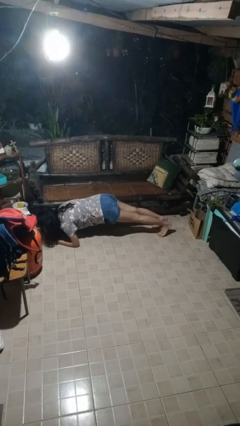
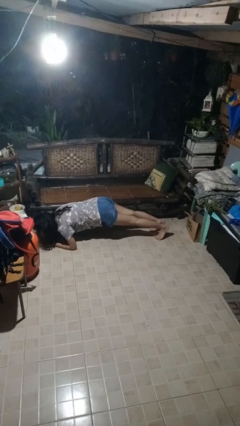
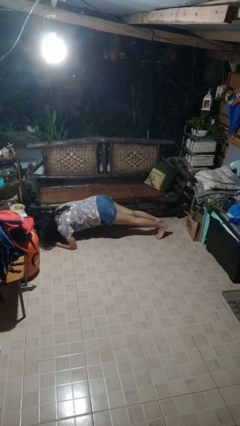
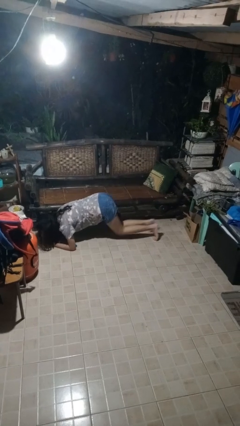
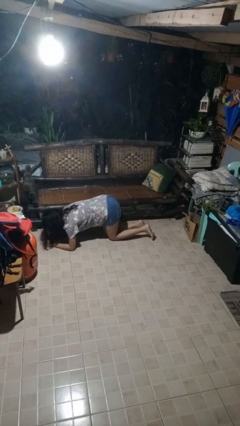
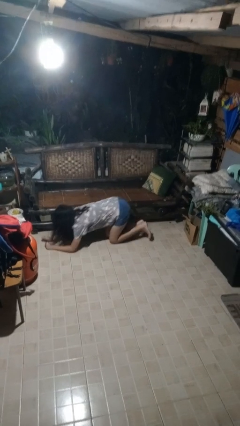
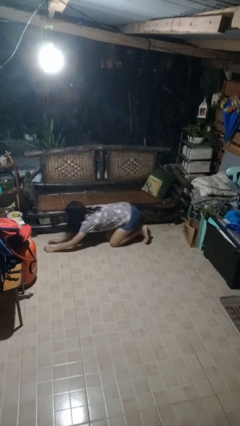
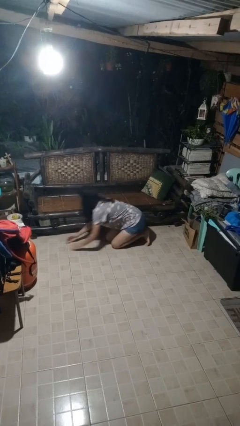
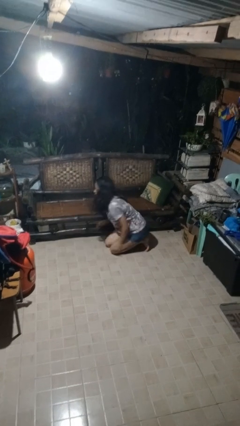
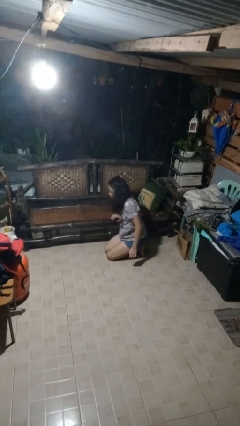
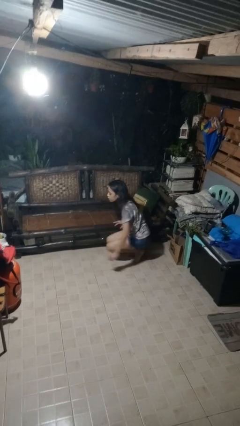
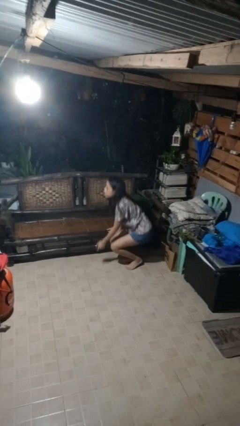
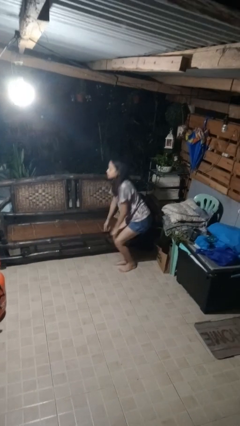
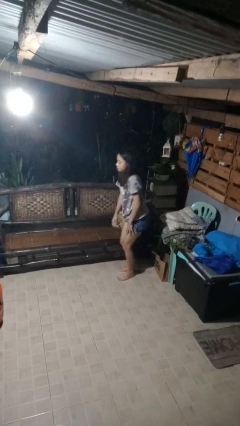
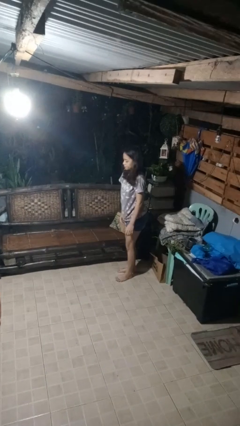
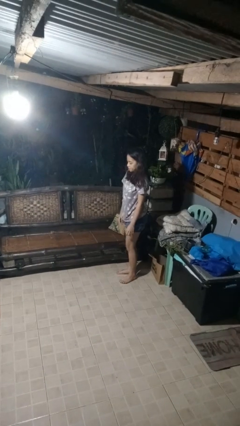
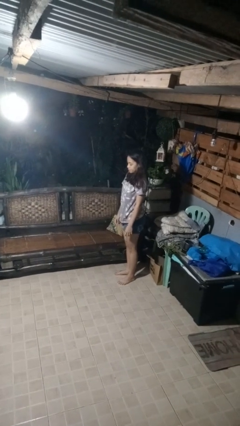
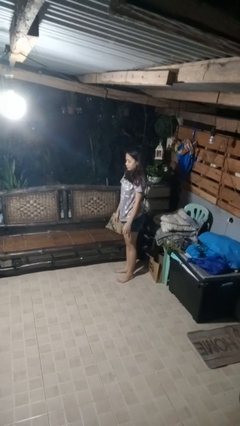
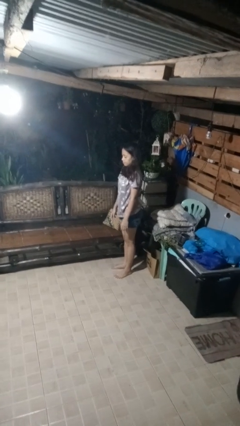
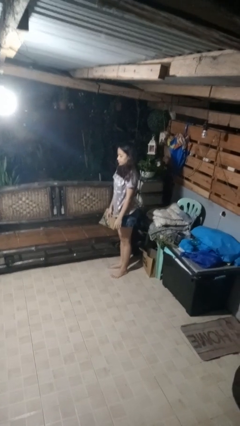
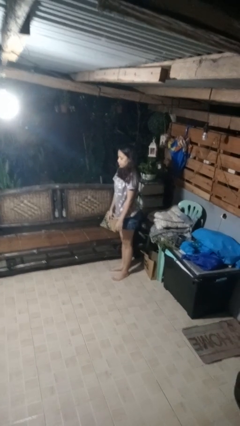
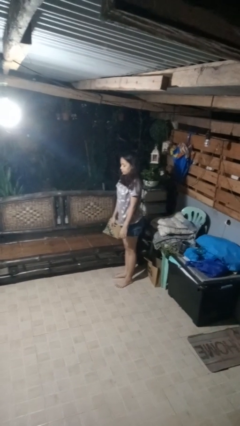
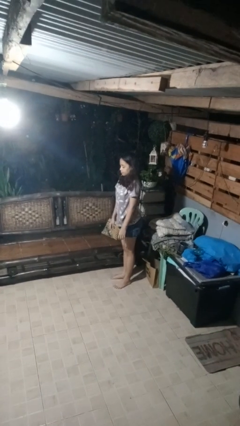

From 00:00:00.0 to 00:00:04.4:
person stands up from floor

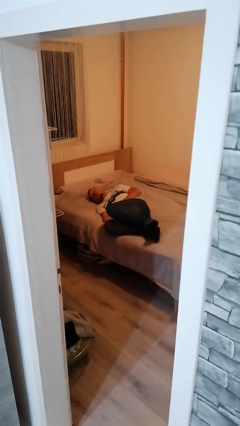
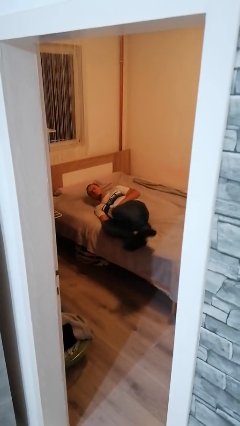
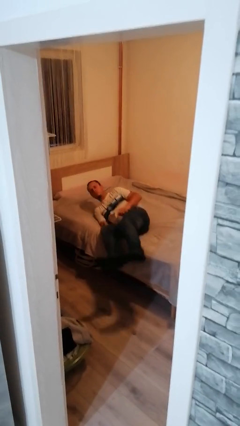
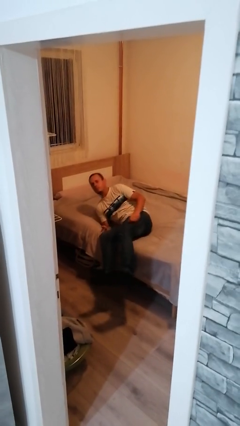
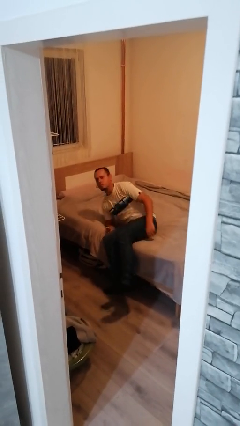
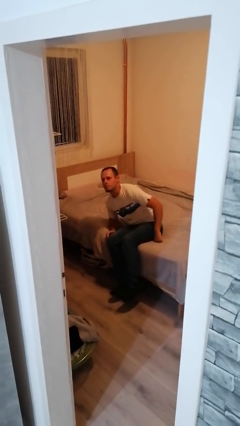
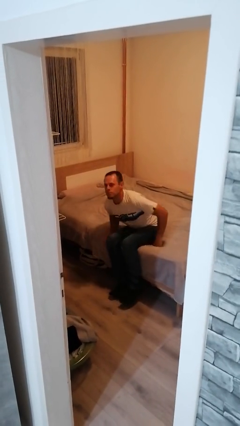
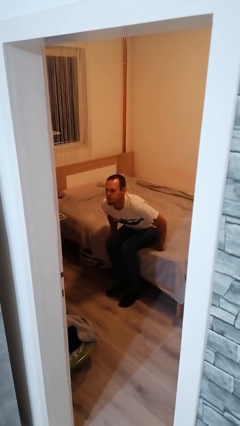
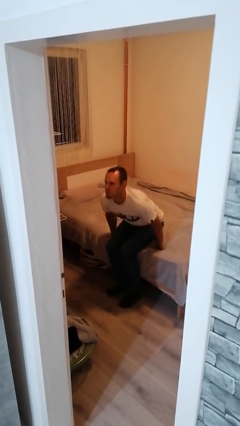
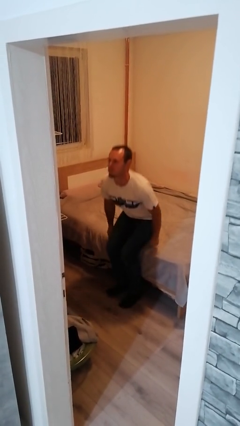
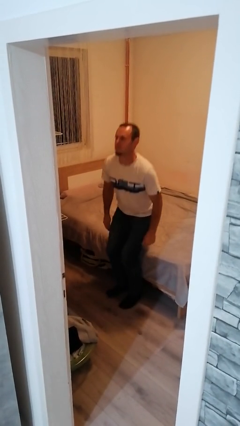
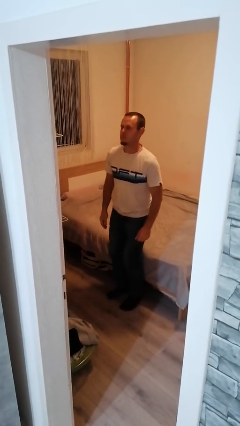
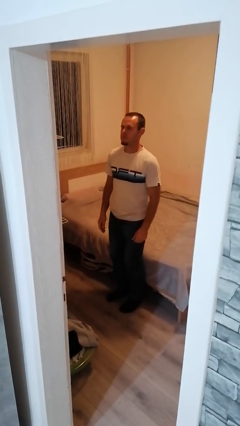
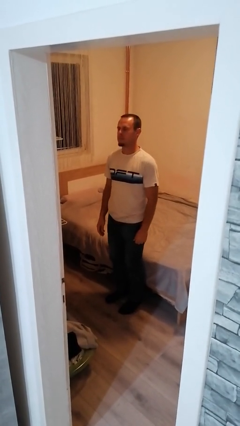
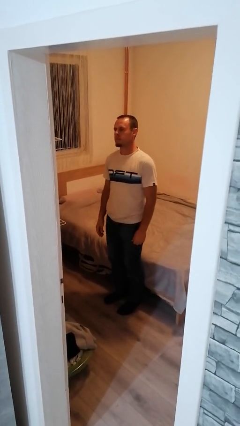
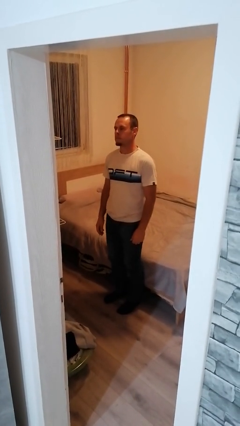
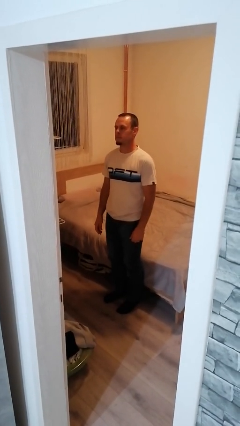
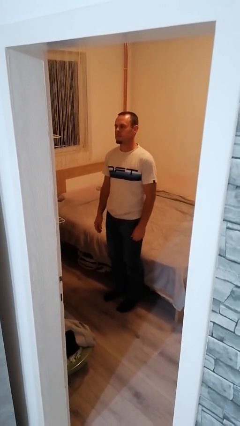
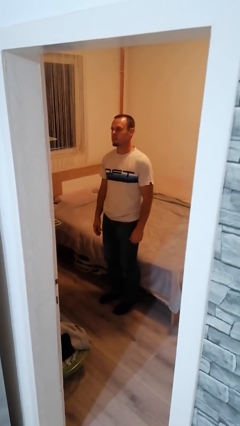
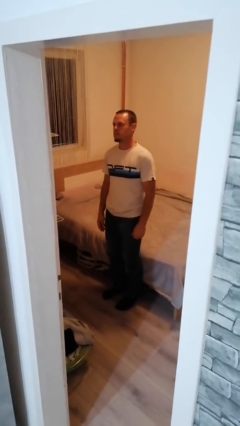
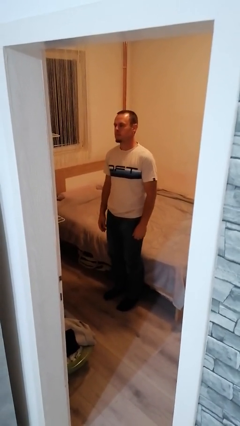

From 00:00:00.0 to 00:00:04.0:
person stands up

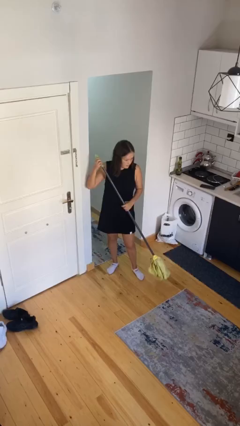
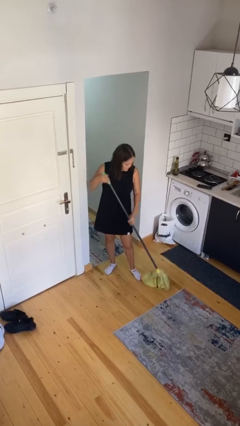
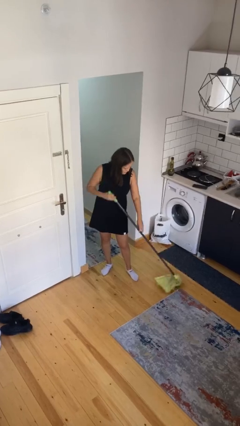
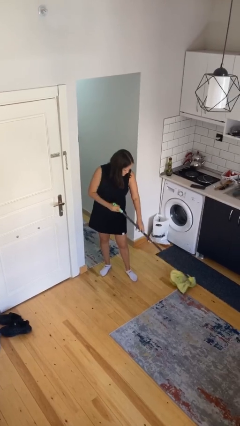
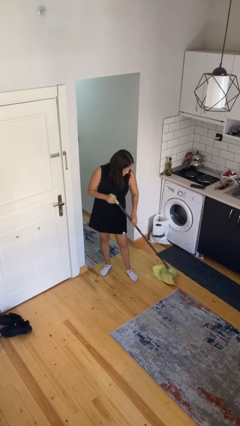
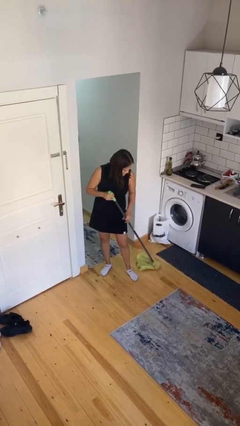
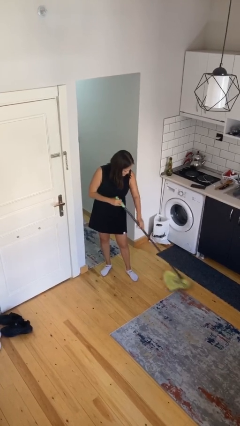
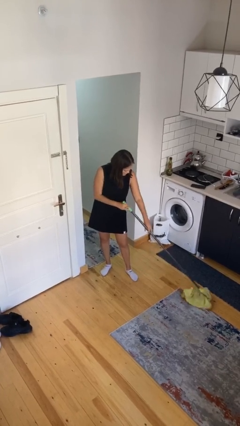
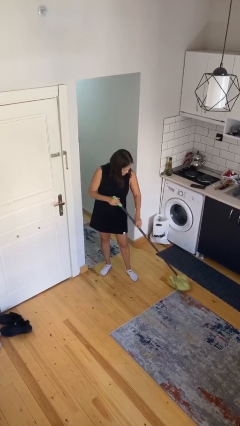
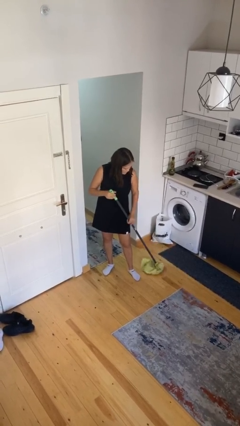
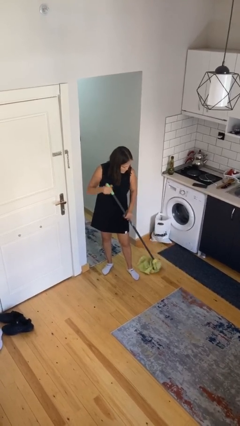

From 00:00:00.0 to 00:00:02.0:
person sweeps floor

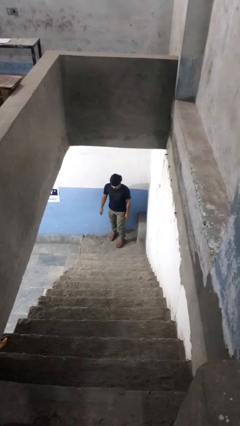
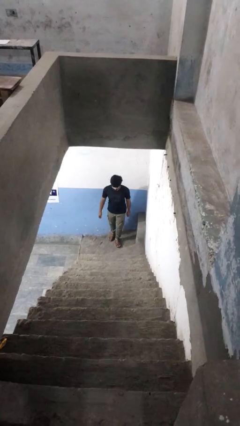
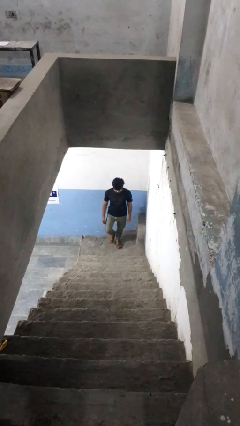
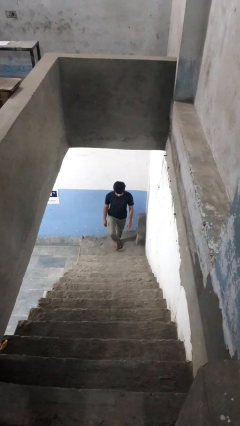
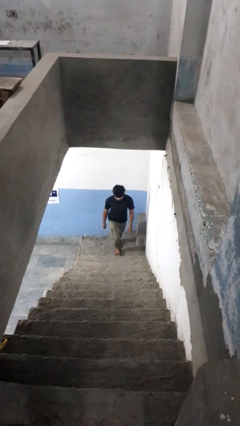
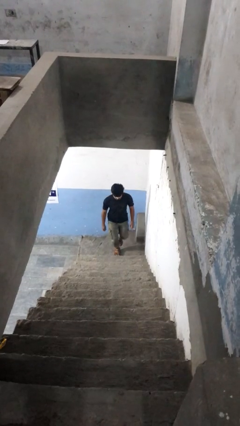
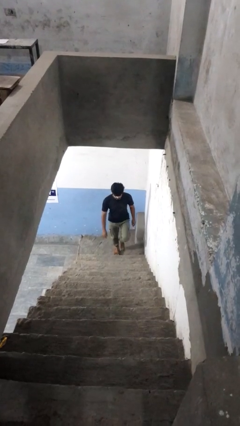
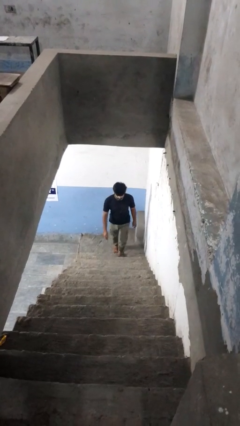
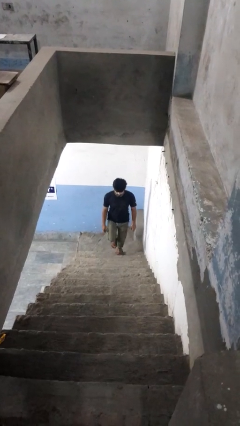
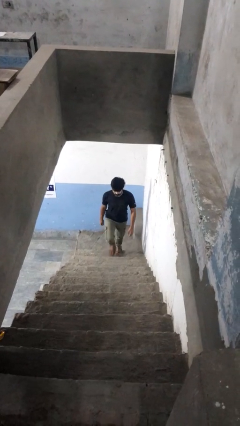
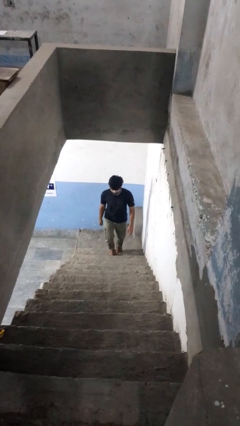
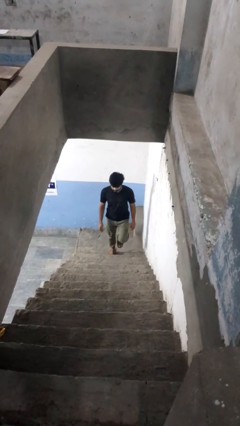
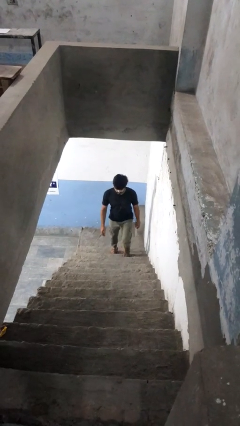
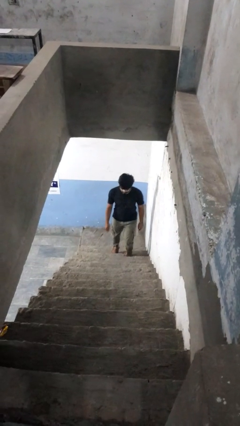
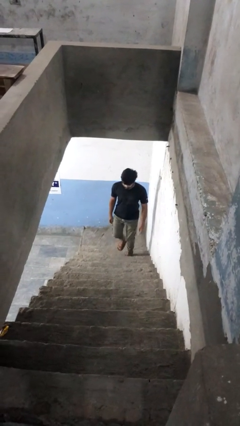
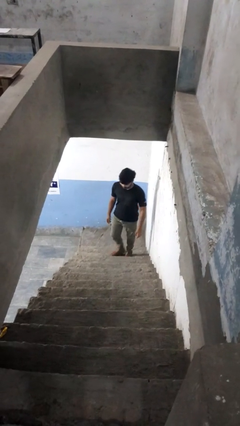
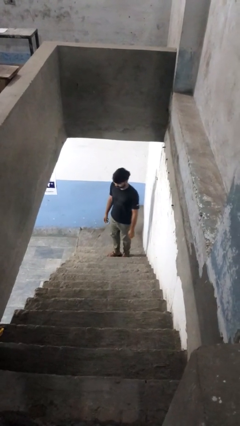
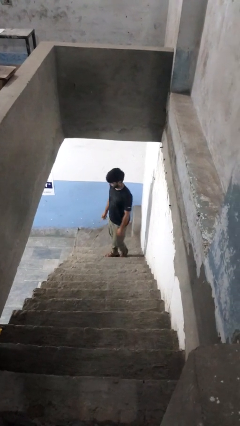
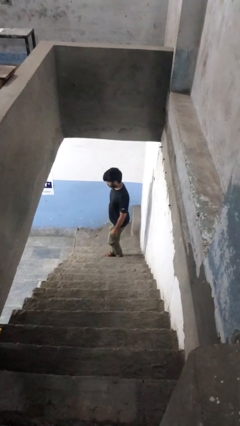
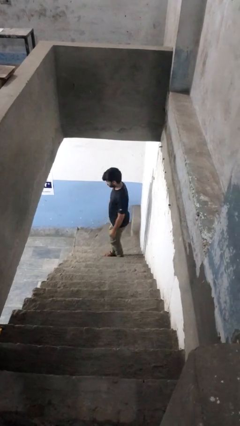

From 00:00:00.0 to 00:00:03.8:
person climbs up stairs

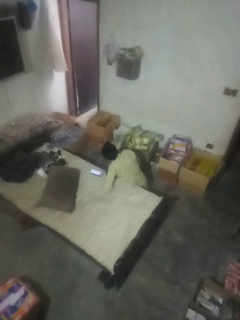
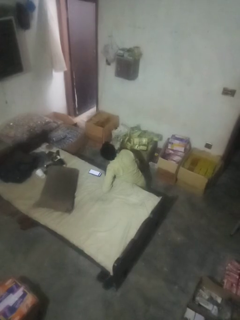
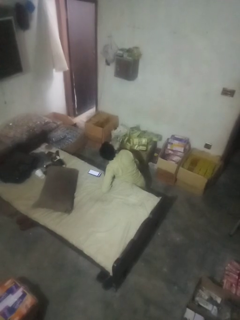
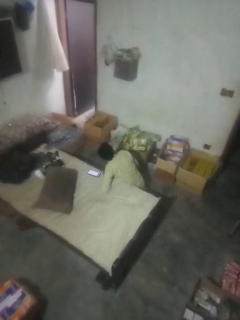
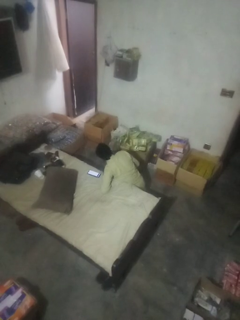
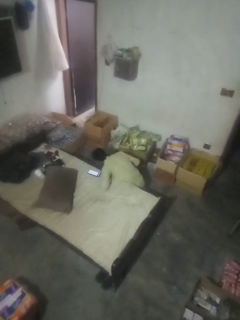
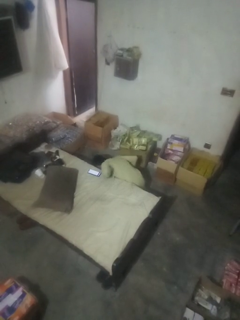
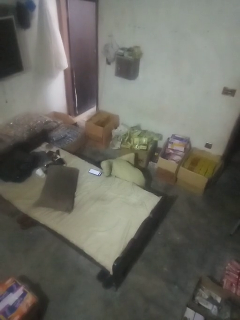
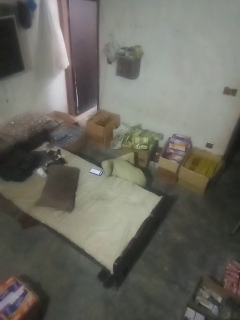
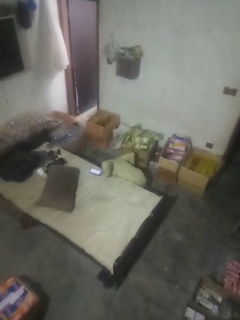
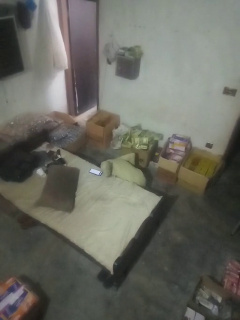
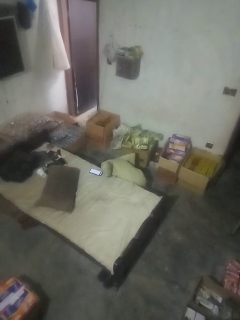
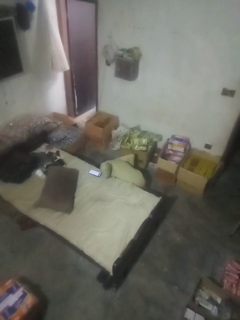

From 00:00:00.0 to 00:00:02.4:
person searches under bed

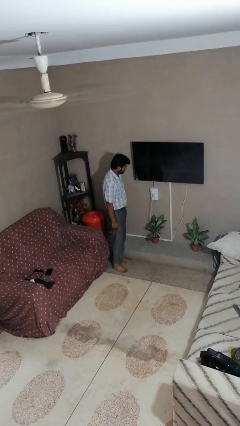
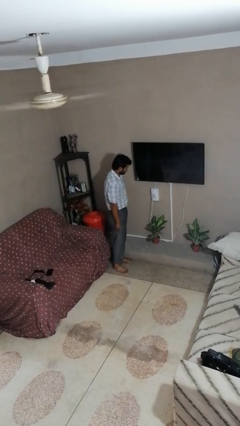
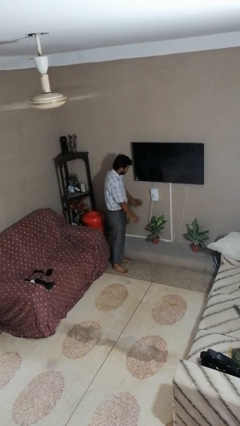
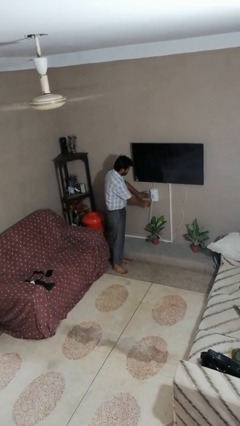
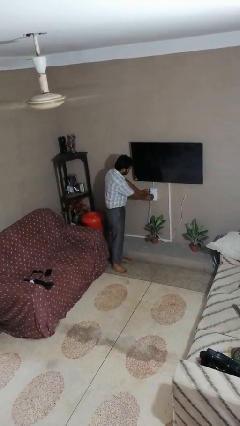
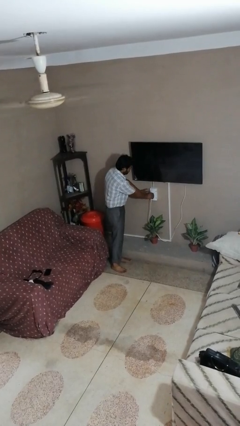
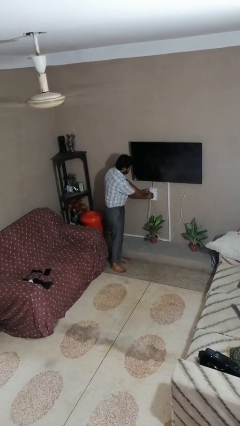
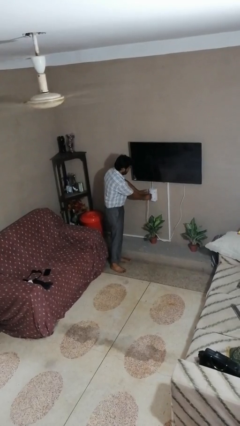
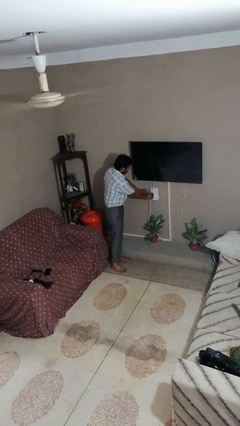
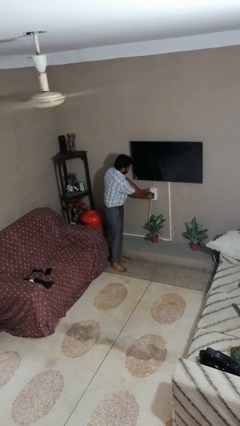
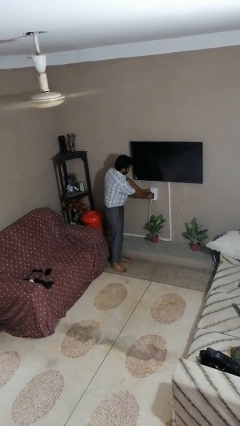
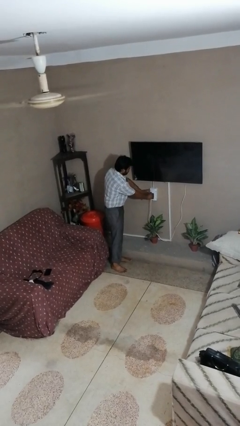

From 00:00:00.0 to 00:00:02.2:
person unplugs from electrical socket
